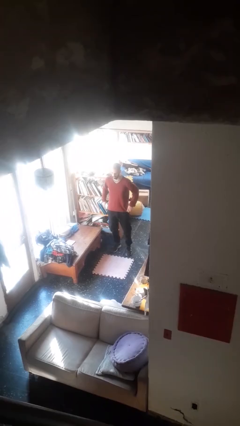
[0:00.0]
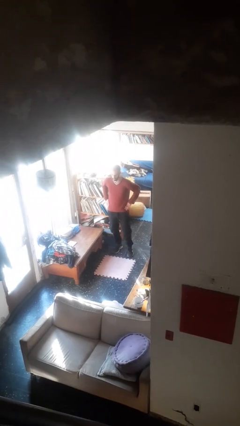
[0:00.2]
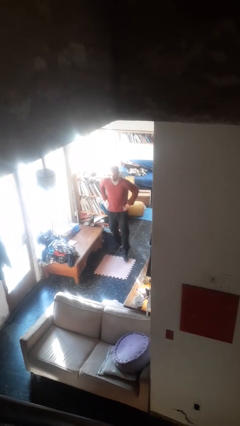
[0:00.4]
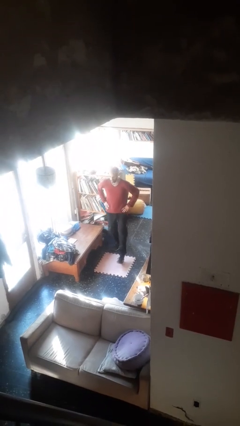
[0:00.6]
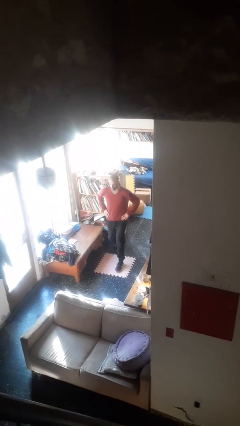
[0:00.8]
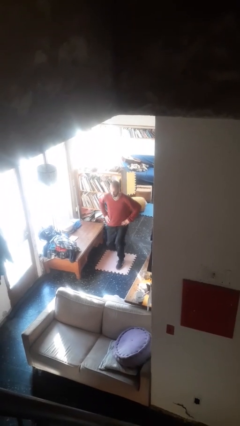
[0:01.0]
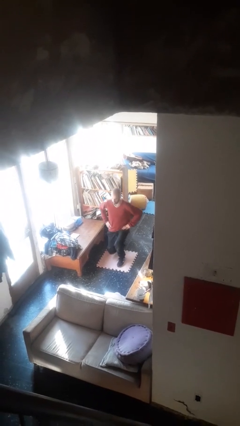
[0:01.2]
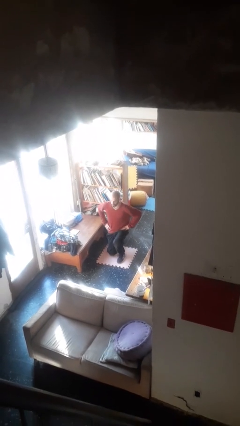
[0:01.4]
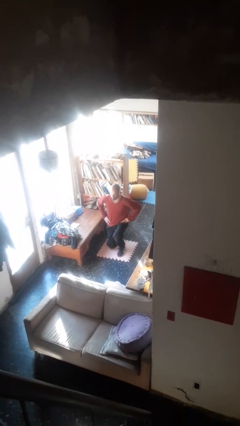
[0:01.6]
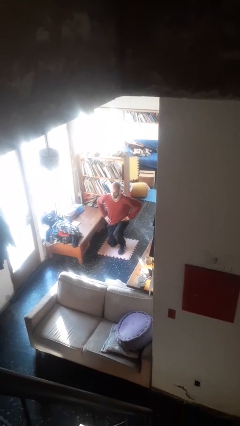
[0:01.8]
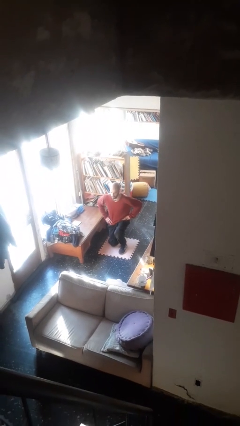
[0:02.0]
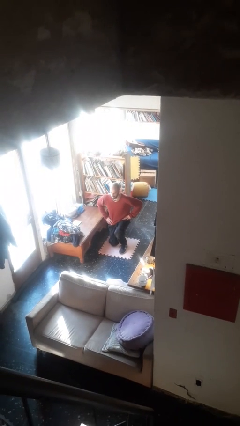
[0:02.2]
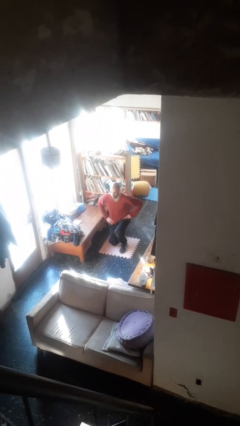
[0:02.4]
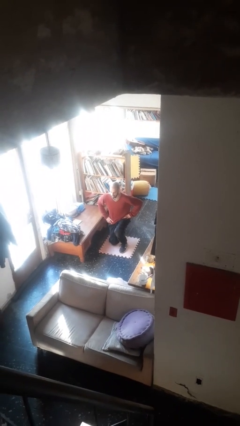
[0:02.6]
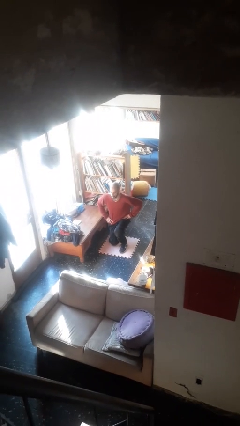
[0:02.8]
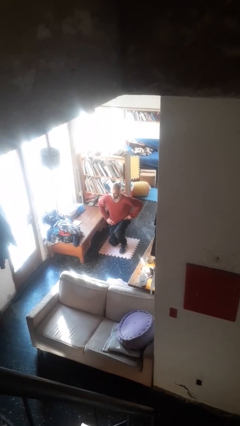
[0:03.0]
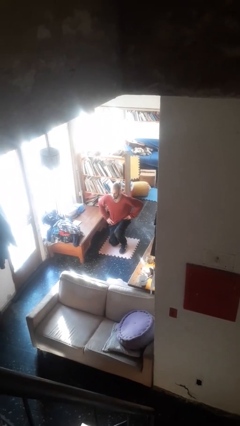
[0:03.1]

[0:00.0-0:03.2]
person kneels

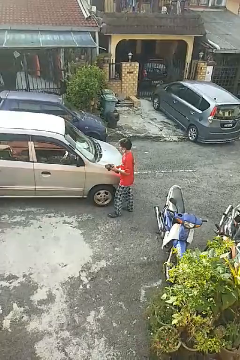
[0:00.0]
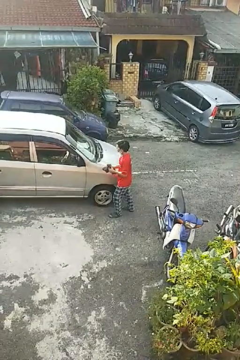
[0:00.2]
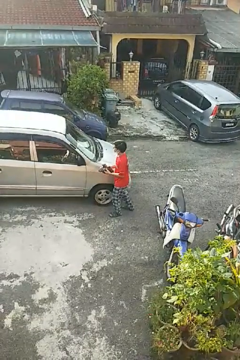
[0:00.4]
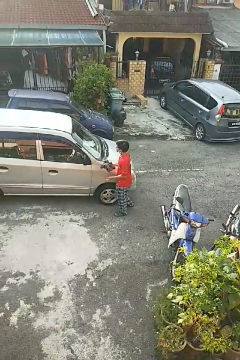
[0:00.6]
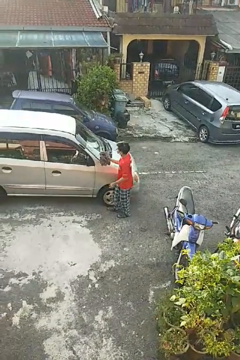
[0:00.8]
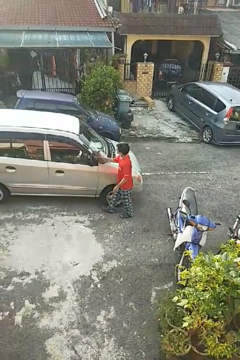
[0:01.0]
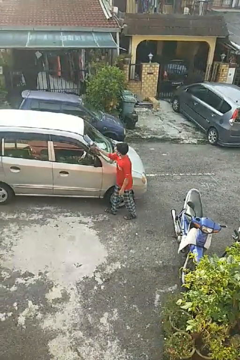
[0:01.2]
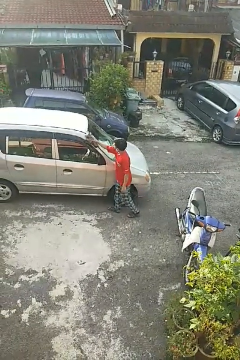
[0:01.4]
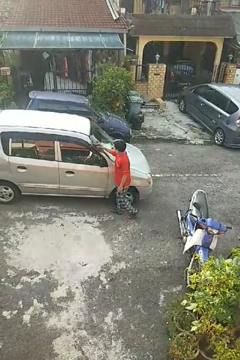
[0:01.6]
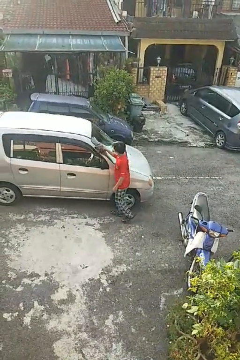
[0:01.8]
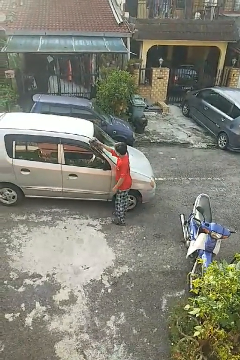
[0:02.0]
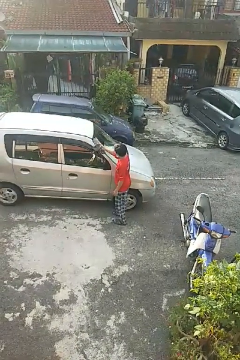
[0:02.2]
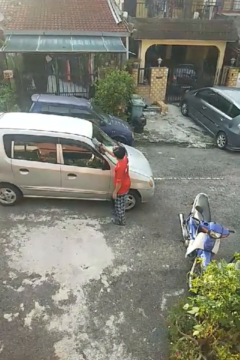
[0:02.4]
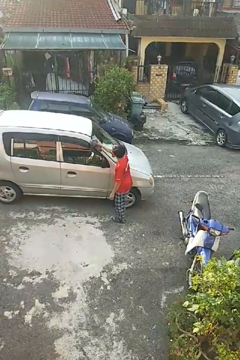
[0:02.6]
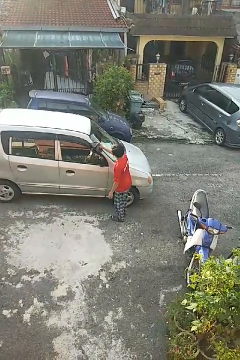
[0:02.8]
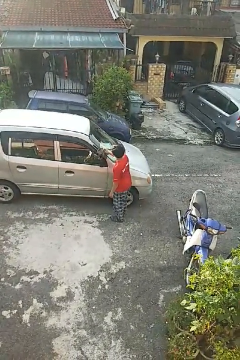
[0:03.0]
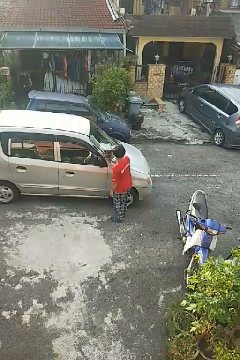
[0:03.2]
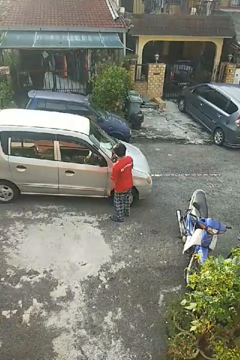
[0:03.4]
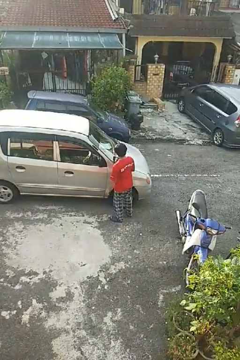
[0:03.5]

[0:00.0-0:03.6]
person polishes car with rag

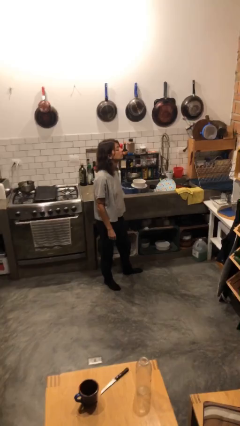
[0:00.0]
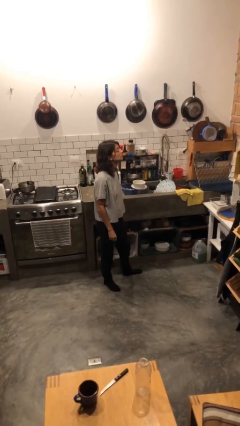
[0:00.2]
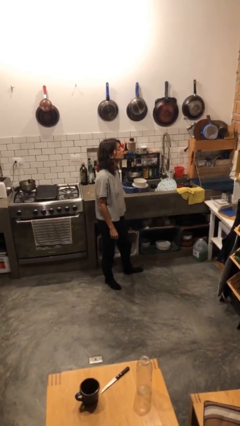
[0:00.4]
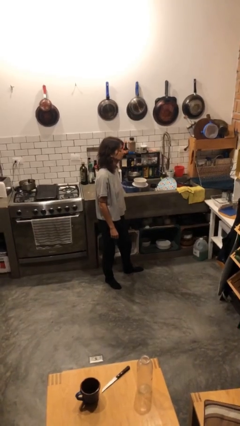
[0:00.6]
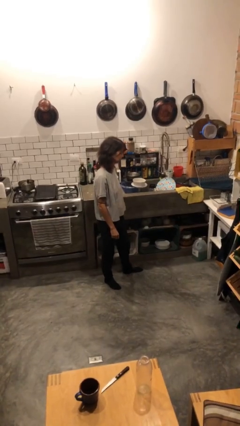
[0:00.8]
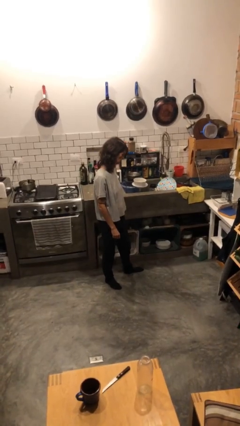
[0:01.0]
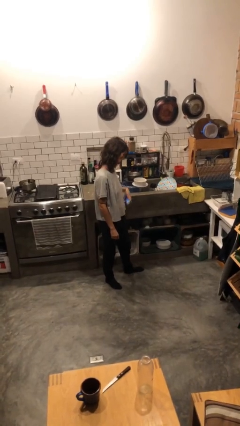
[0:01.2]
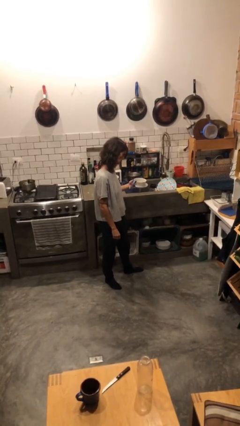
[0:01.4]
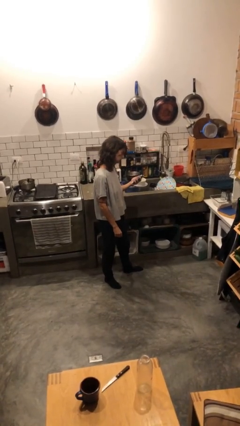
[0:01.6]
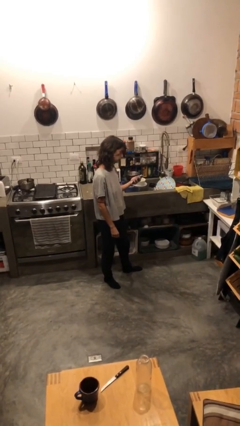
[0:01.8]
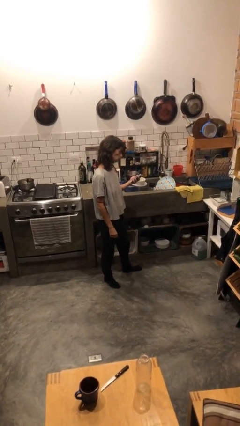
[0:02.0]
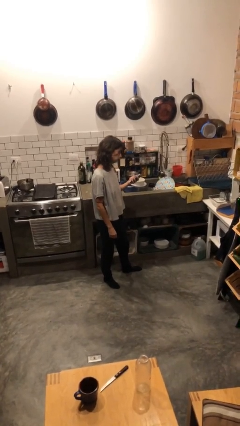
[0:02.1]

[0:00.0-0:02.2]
person takes phone from pocket

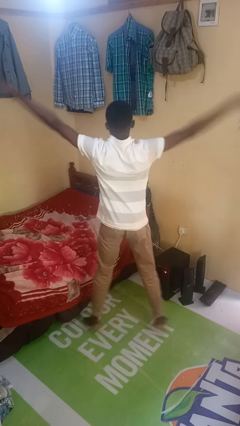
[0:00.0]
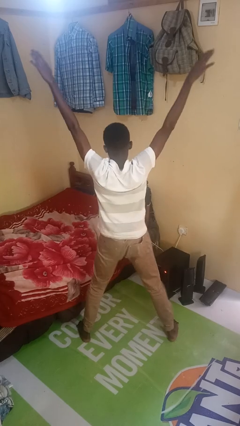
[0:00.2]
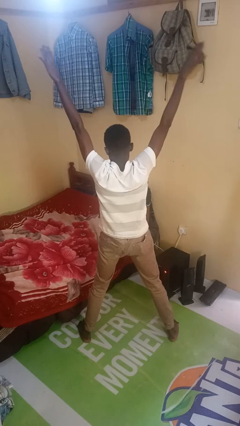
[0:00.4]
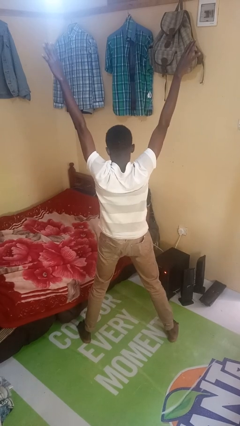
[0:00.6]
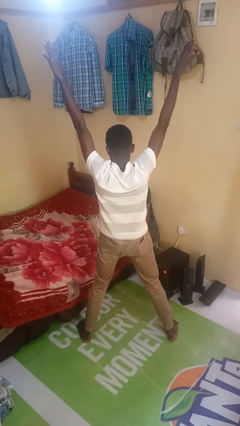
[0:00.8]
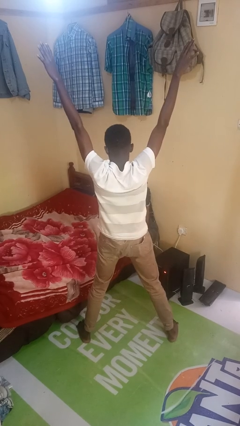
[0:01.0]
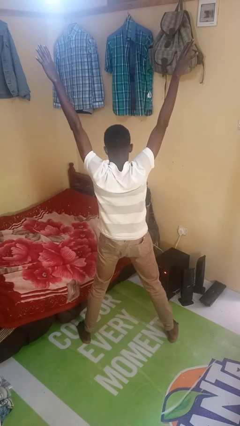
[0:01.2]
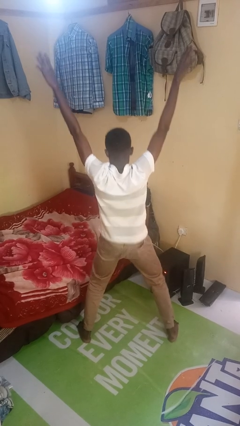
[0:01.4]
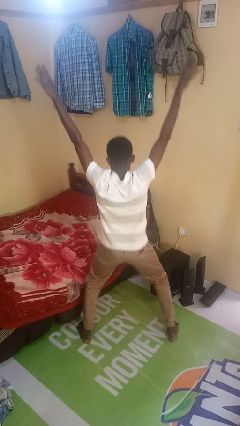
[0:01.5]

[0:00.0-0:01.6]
person exercises with jumping jacks

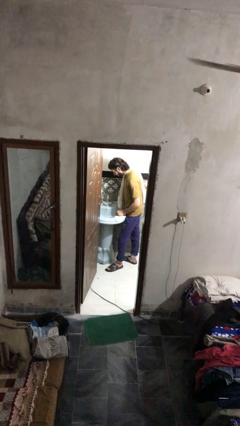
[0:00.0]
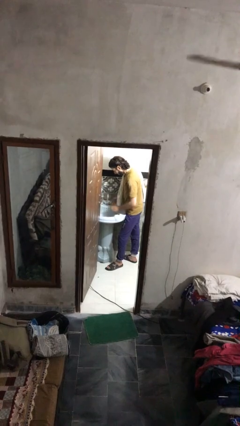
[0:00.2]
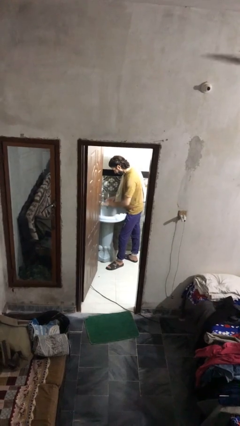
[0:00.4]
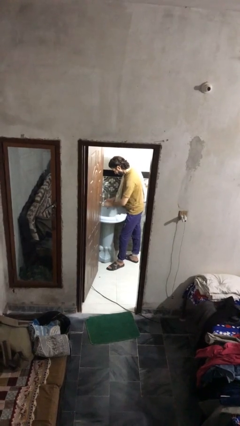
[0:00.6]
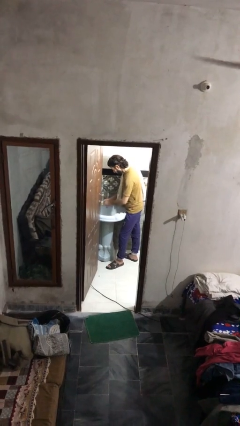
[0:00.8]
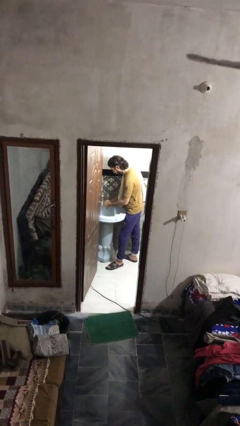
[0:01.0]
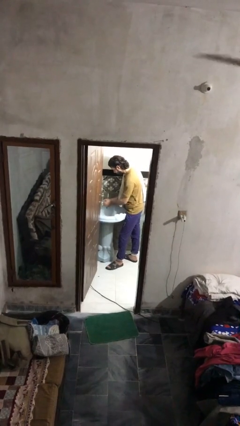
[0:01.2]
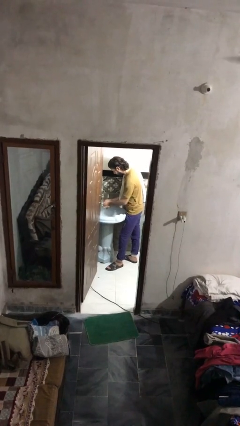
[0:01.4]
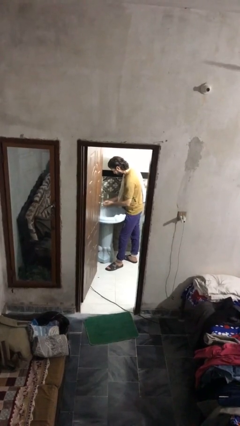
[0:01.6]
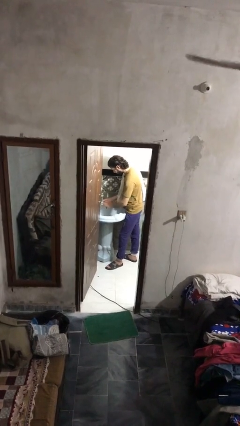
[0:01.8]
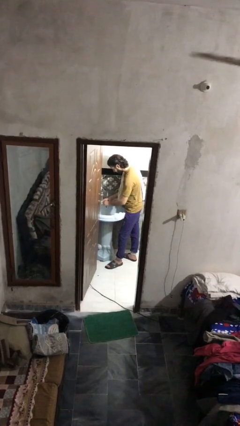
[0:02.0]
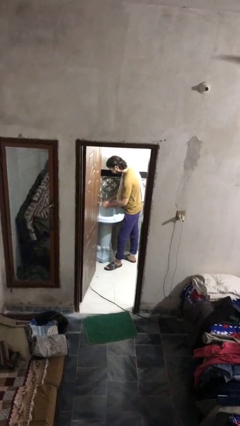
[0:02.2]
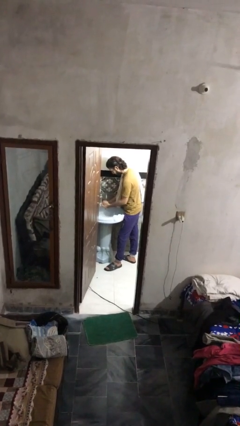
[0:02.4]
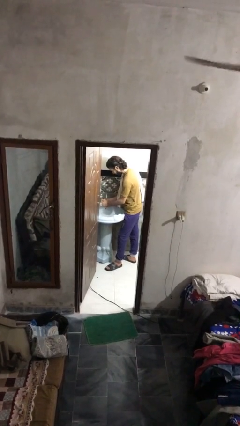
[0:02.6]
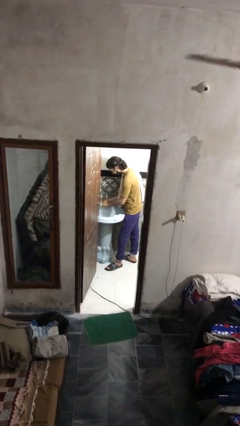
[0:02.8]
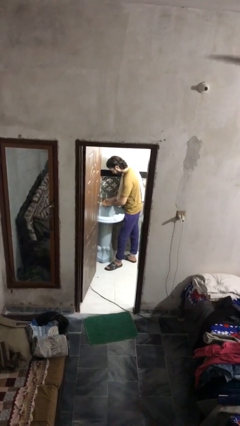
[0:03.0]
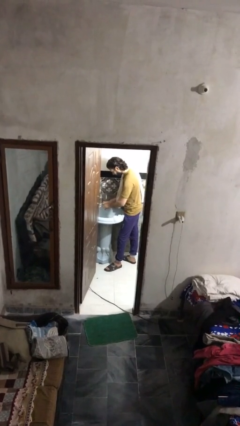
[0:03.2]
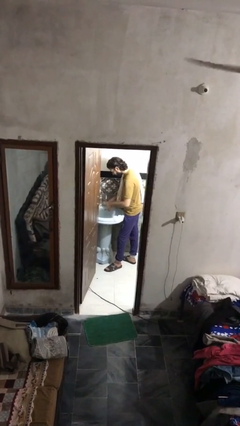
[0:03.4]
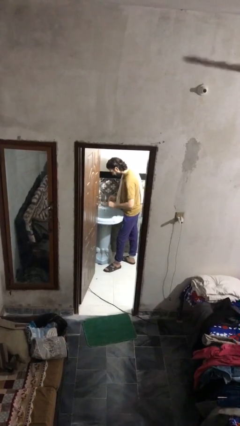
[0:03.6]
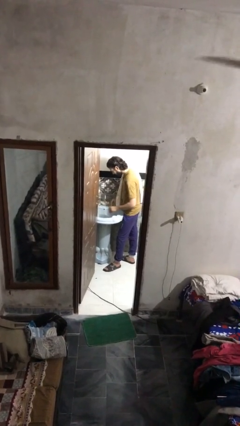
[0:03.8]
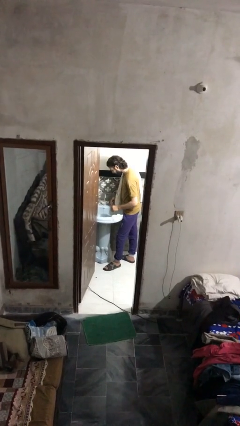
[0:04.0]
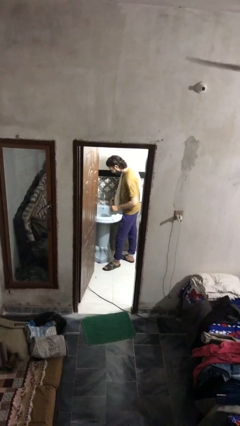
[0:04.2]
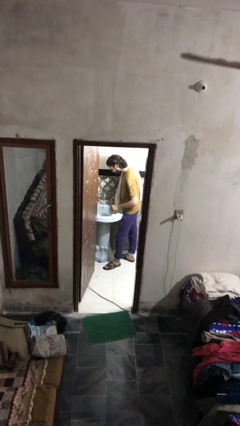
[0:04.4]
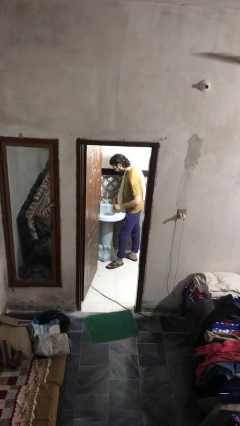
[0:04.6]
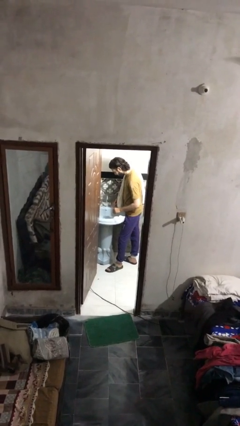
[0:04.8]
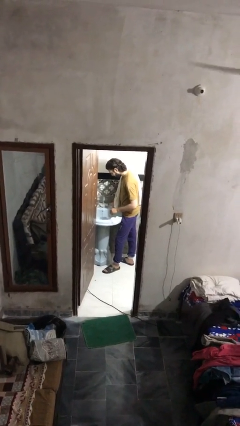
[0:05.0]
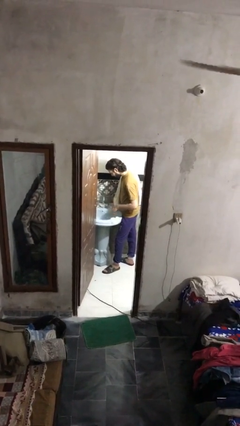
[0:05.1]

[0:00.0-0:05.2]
person washes hands

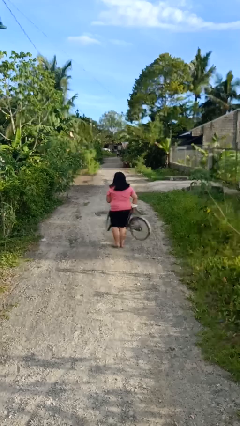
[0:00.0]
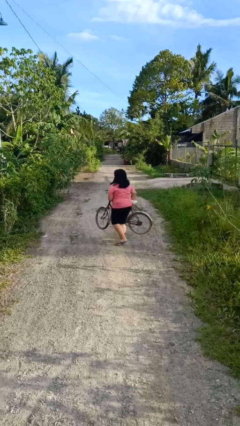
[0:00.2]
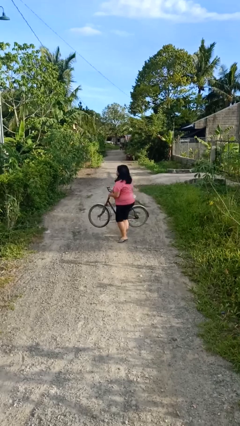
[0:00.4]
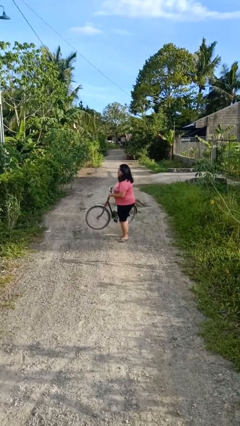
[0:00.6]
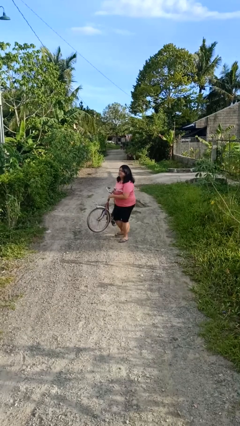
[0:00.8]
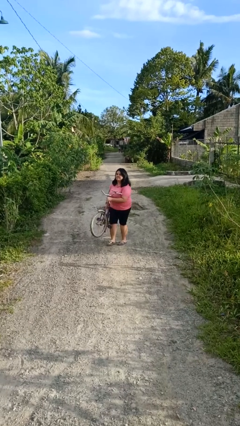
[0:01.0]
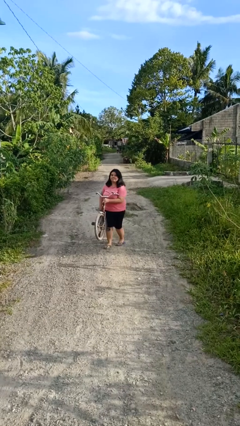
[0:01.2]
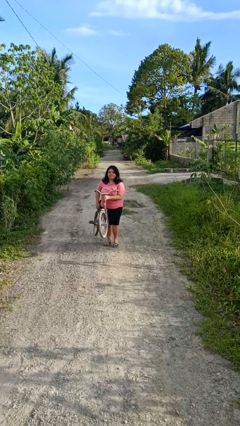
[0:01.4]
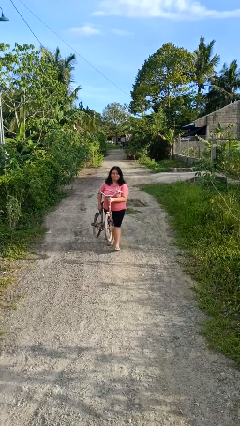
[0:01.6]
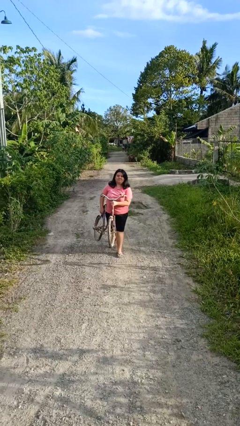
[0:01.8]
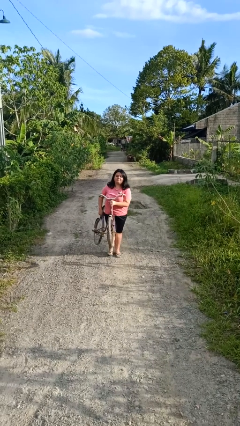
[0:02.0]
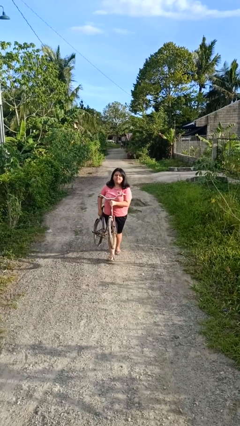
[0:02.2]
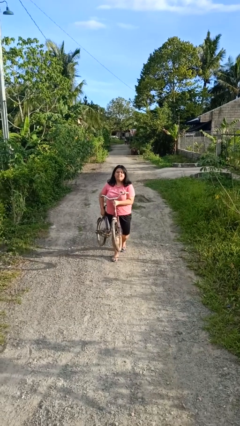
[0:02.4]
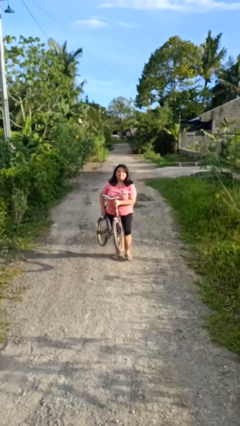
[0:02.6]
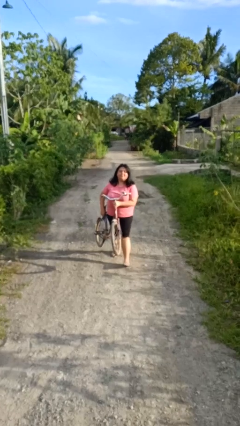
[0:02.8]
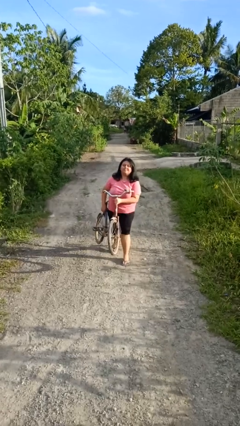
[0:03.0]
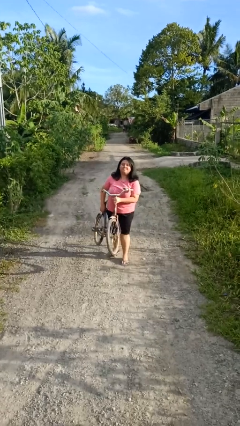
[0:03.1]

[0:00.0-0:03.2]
person carries bicycle
